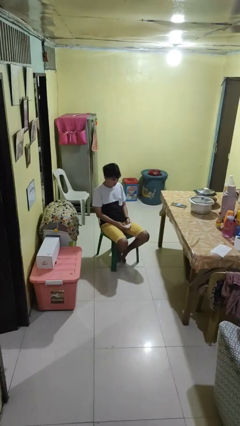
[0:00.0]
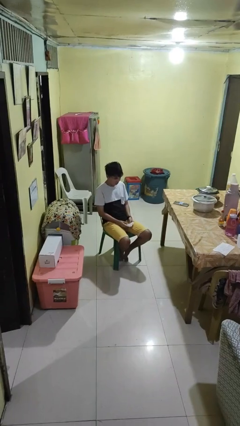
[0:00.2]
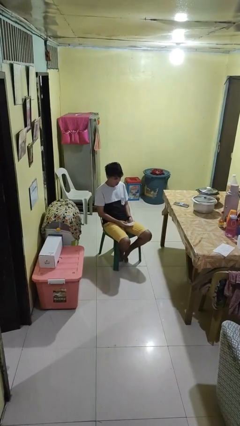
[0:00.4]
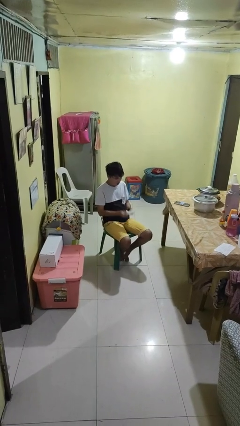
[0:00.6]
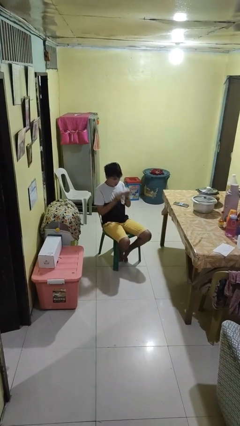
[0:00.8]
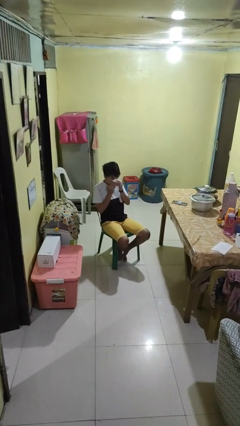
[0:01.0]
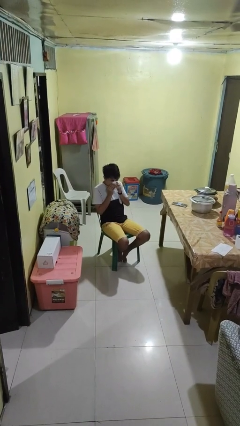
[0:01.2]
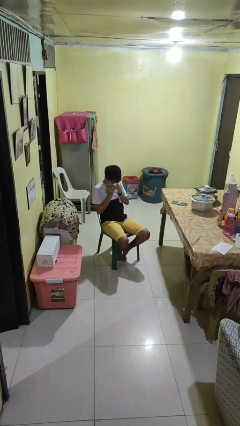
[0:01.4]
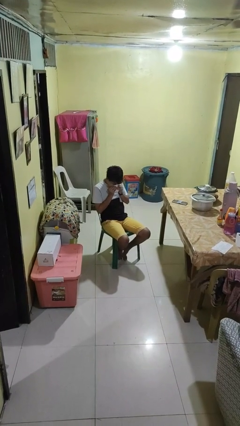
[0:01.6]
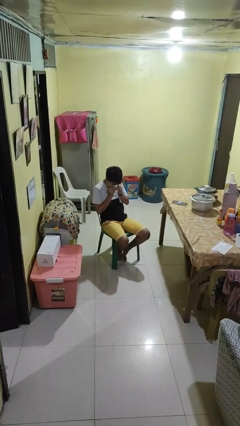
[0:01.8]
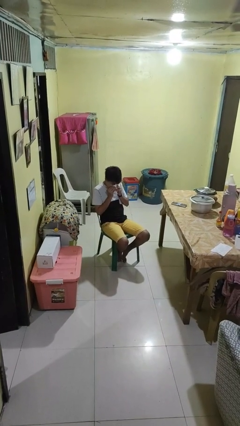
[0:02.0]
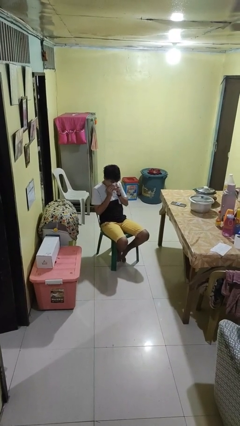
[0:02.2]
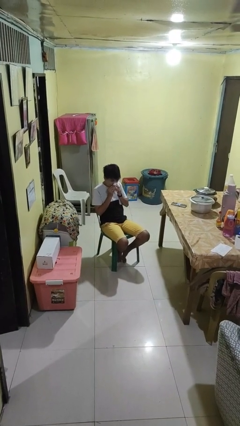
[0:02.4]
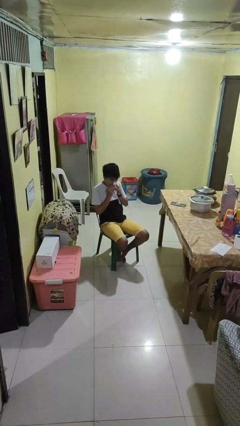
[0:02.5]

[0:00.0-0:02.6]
person blows nose

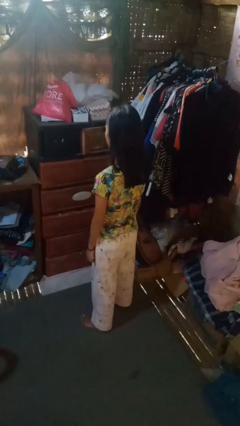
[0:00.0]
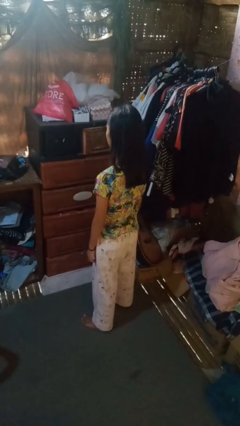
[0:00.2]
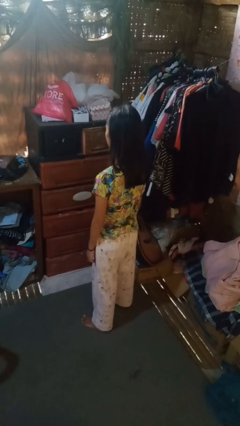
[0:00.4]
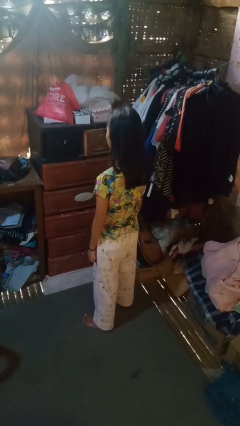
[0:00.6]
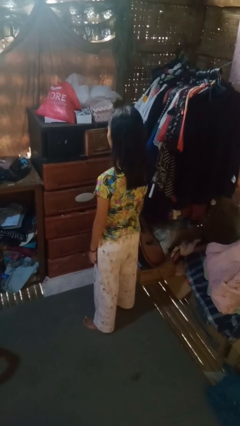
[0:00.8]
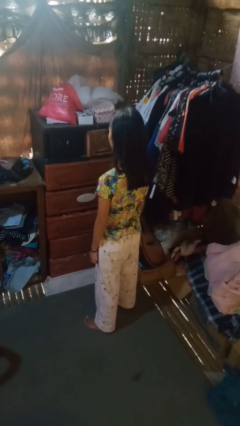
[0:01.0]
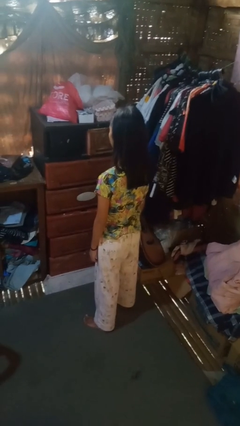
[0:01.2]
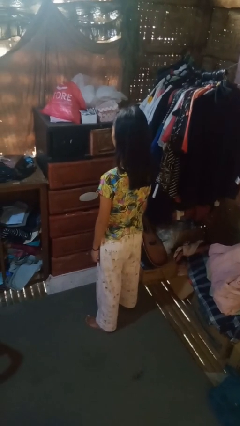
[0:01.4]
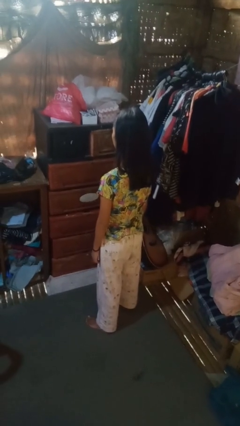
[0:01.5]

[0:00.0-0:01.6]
person closes dresser drawer

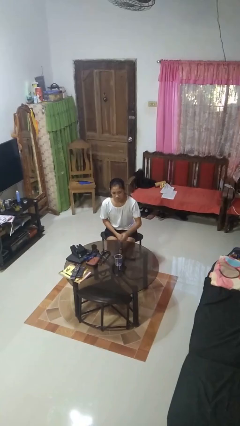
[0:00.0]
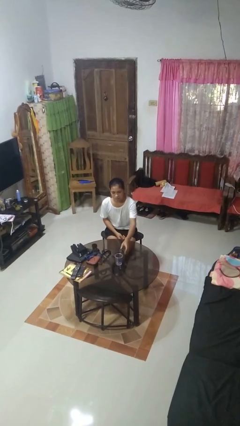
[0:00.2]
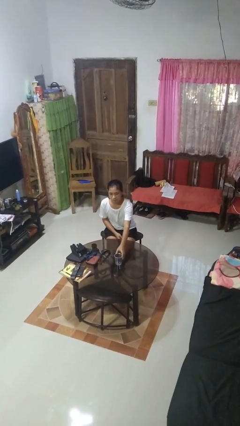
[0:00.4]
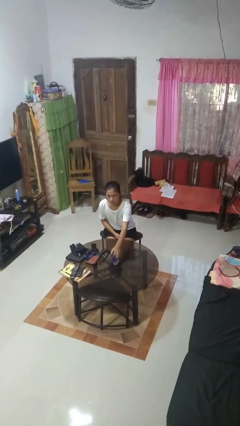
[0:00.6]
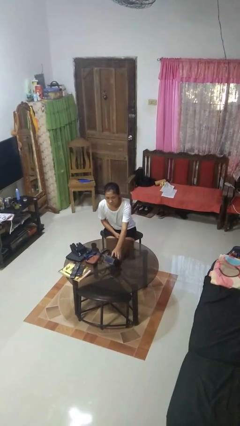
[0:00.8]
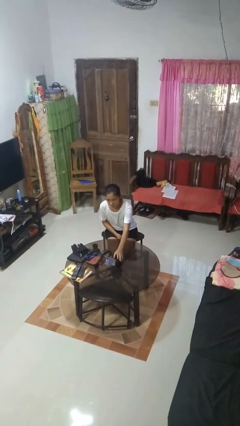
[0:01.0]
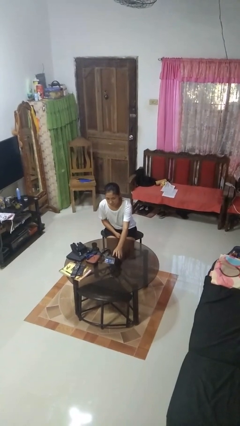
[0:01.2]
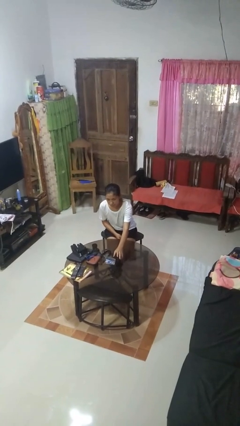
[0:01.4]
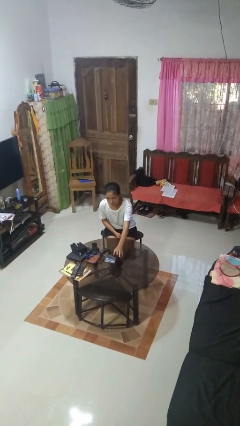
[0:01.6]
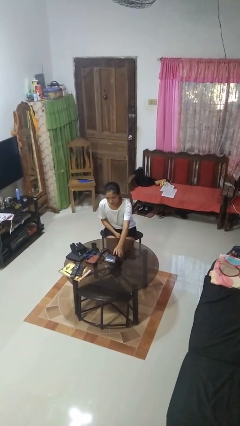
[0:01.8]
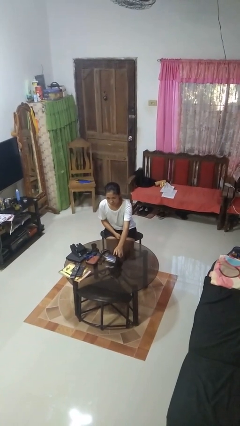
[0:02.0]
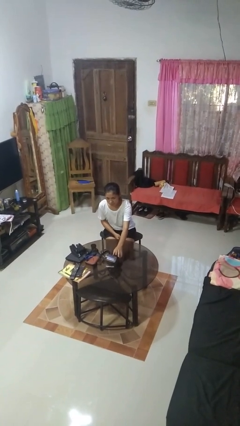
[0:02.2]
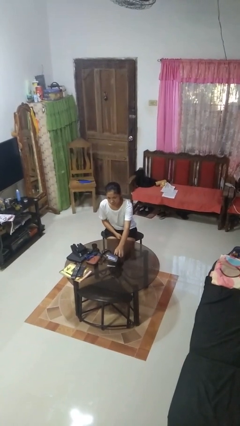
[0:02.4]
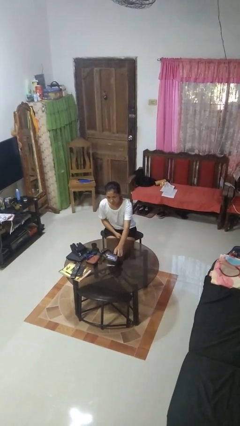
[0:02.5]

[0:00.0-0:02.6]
person knocks over glass

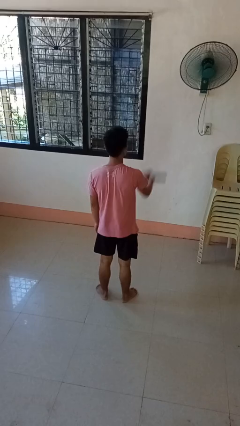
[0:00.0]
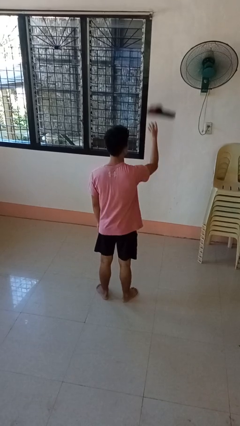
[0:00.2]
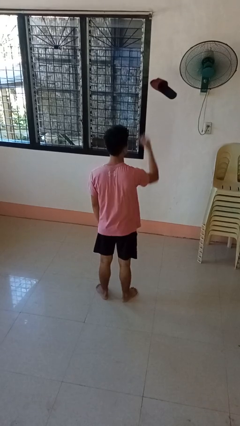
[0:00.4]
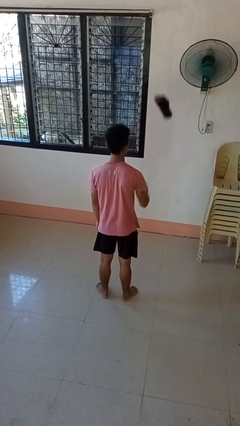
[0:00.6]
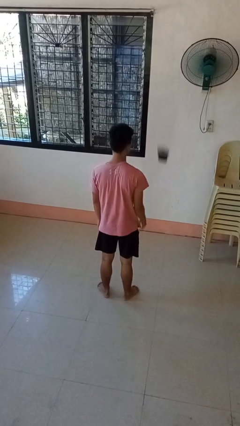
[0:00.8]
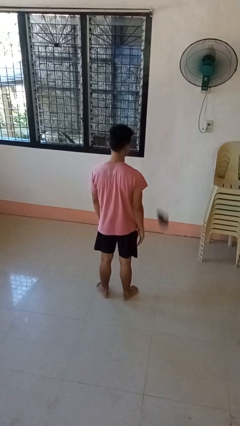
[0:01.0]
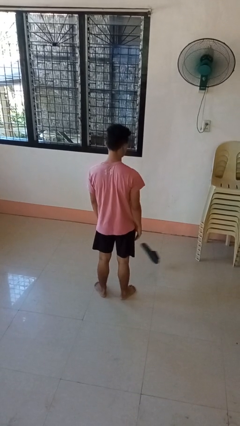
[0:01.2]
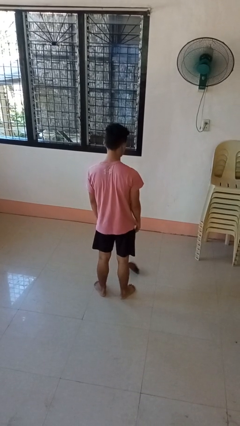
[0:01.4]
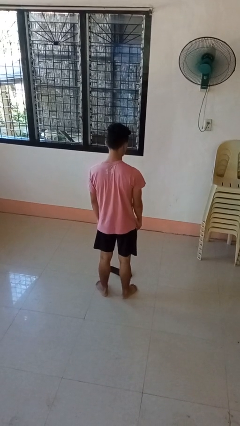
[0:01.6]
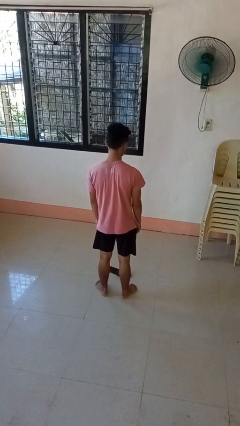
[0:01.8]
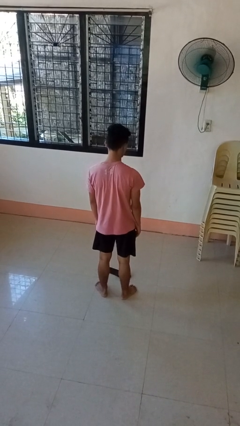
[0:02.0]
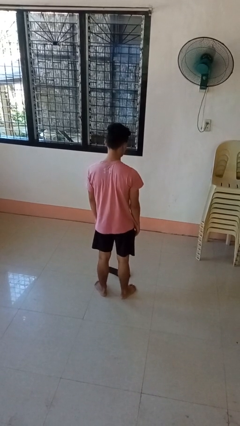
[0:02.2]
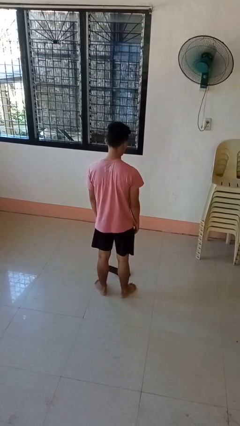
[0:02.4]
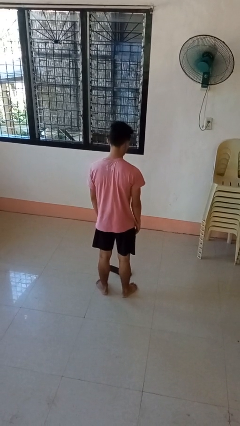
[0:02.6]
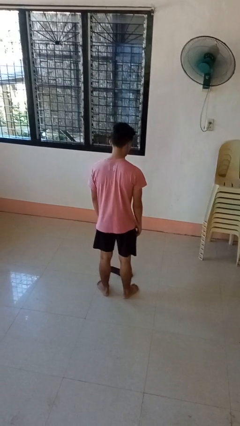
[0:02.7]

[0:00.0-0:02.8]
person throws object into air

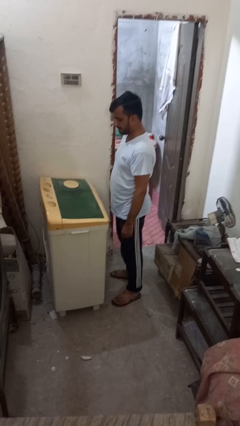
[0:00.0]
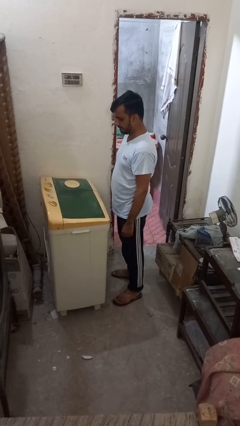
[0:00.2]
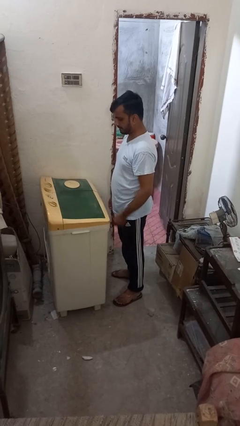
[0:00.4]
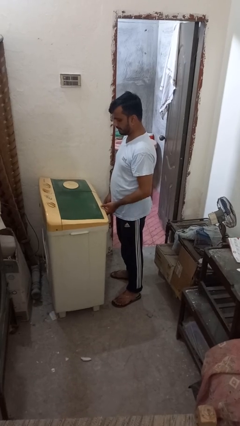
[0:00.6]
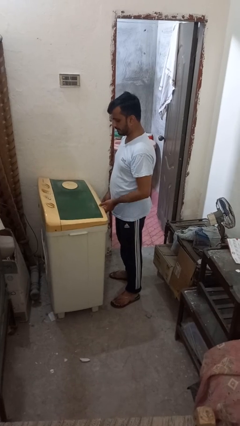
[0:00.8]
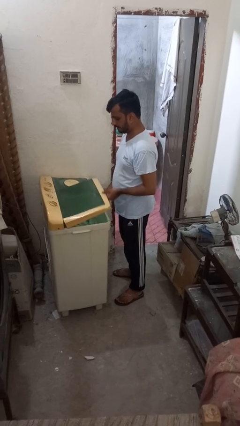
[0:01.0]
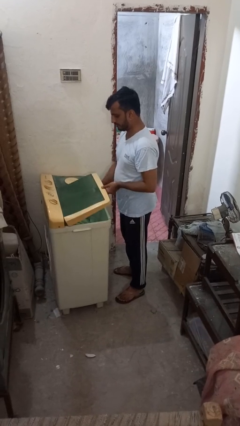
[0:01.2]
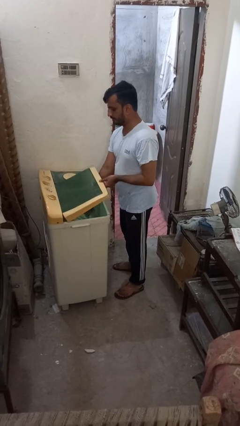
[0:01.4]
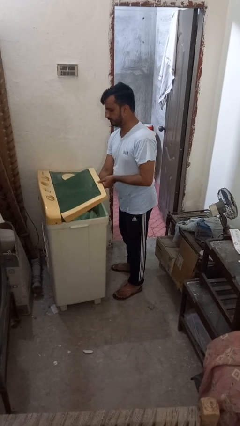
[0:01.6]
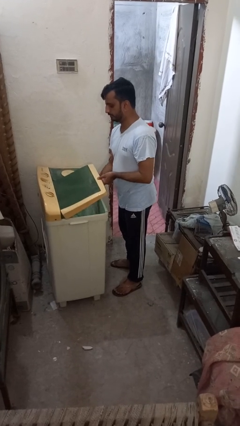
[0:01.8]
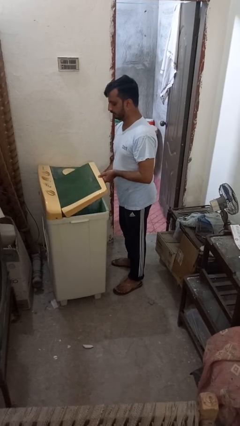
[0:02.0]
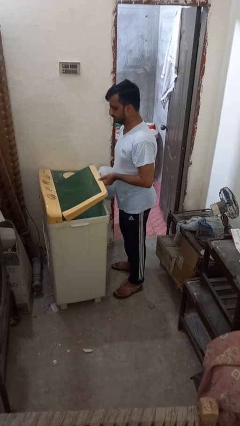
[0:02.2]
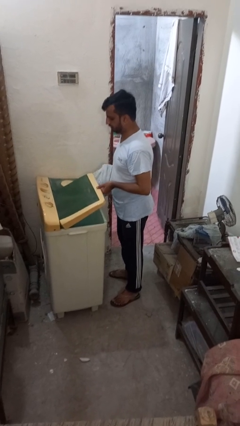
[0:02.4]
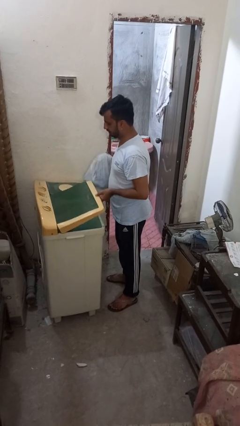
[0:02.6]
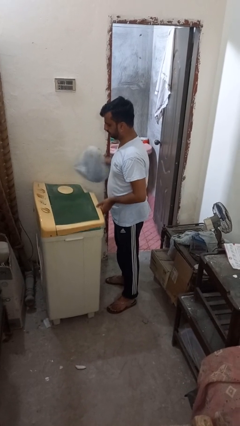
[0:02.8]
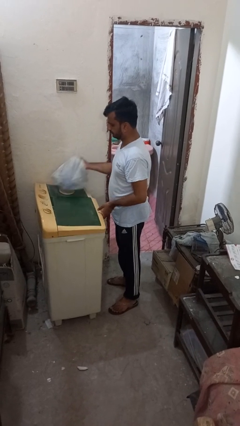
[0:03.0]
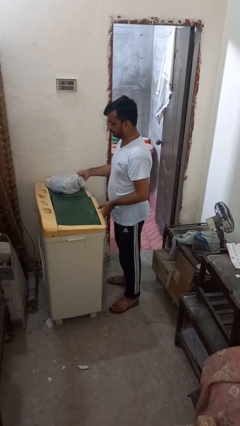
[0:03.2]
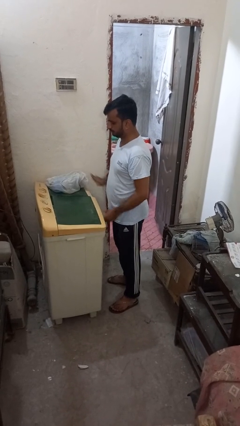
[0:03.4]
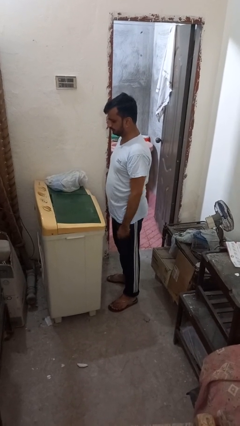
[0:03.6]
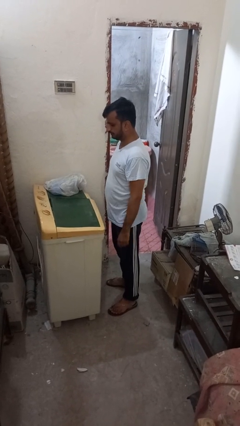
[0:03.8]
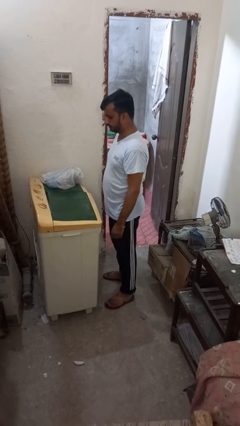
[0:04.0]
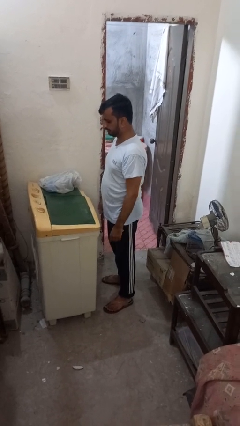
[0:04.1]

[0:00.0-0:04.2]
person unloads clotheswasher

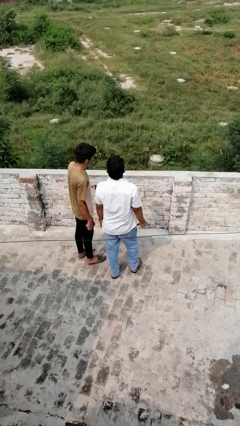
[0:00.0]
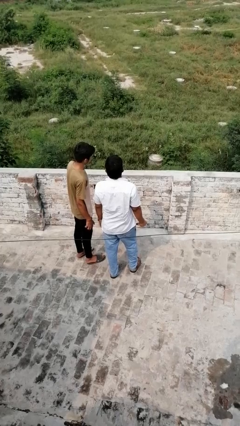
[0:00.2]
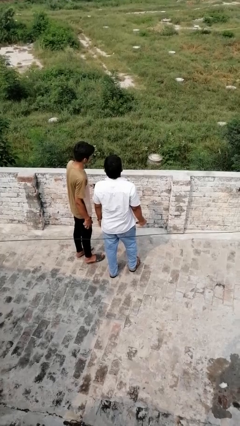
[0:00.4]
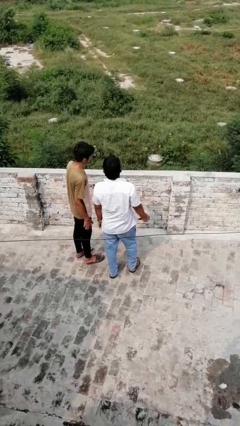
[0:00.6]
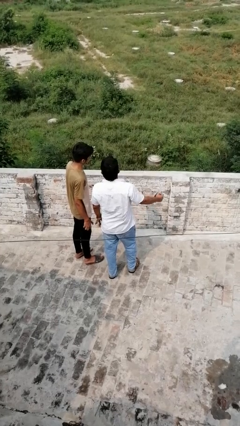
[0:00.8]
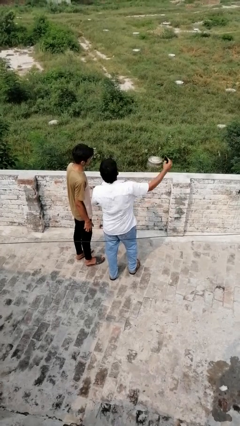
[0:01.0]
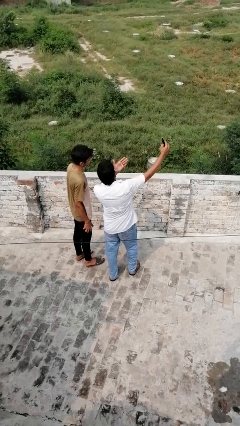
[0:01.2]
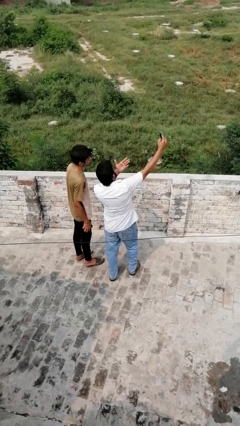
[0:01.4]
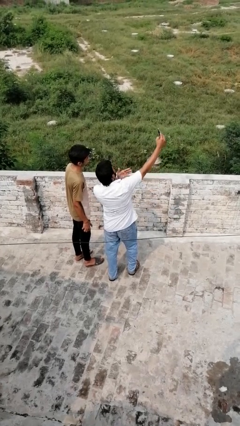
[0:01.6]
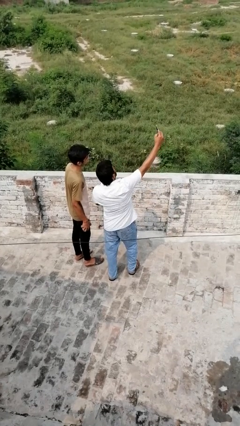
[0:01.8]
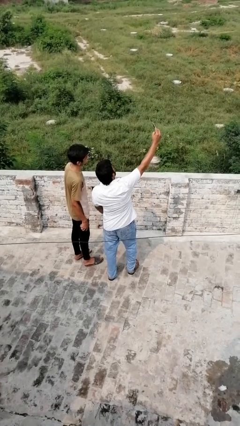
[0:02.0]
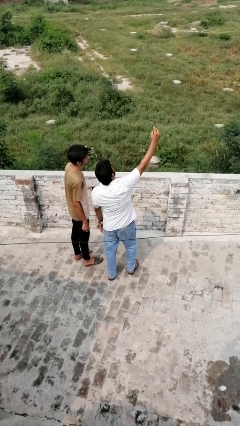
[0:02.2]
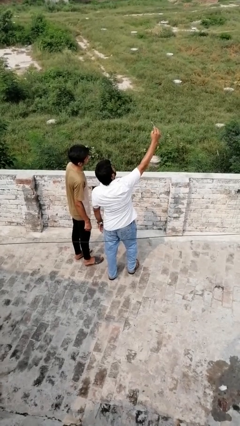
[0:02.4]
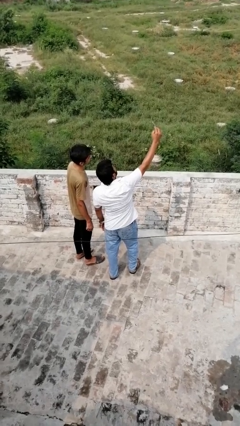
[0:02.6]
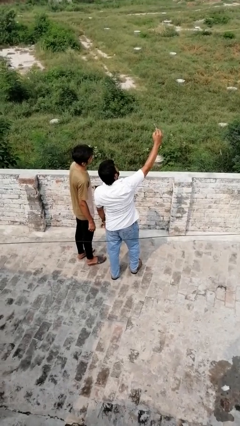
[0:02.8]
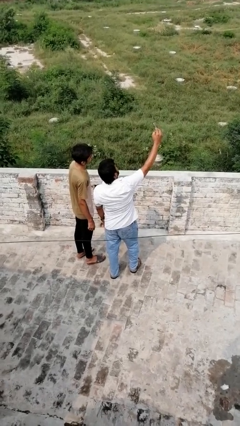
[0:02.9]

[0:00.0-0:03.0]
person takes selfie with person

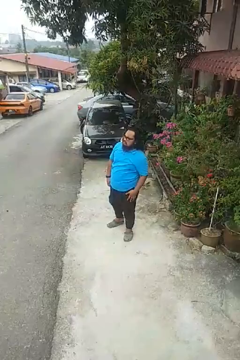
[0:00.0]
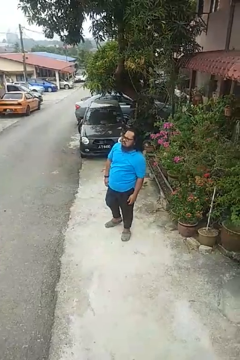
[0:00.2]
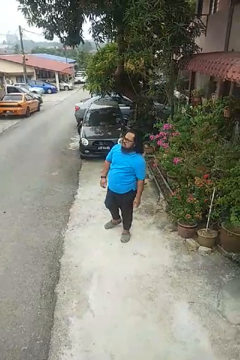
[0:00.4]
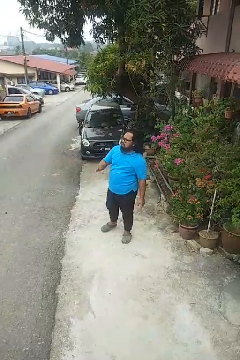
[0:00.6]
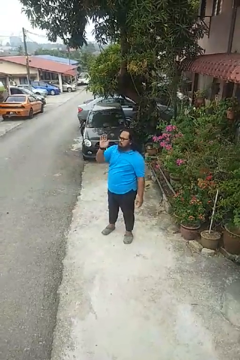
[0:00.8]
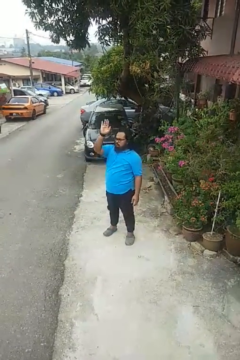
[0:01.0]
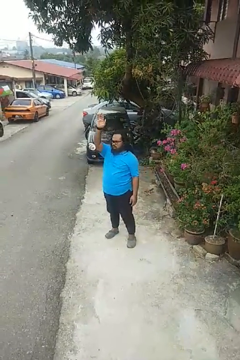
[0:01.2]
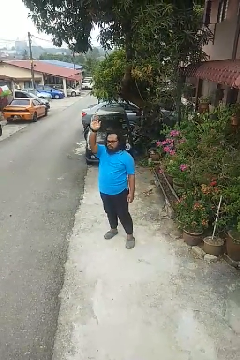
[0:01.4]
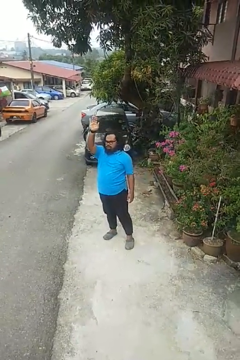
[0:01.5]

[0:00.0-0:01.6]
person gestures raise hand
